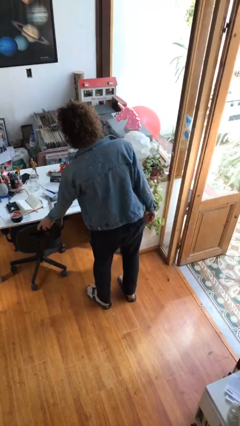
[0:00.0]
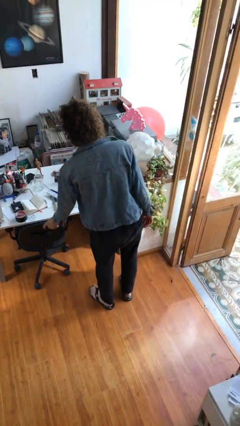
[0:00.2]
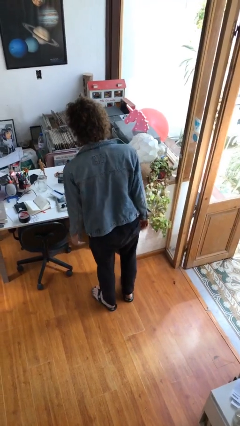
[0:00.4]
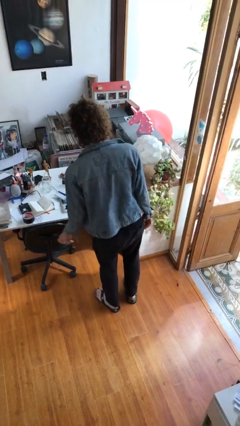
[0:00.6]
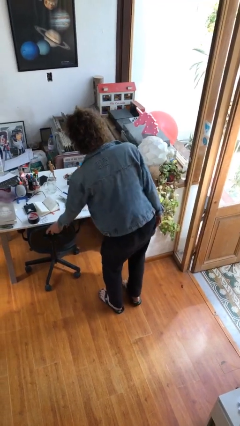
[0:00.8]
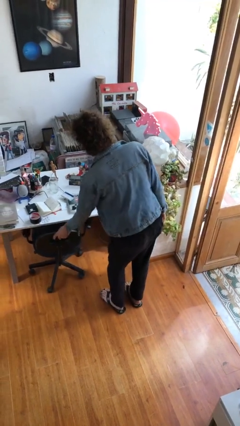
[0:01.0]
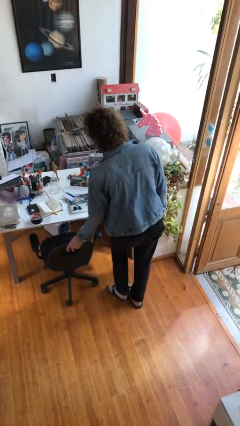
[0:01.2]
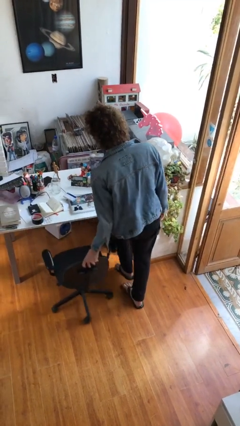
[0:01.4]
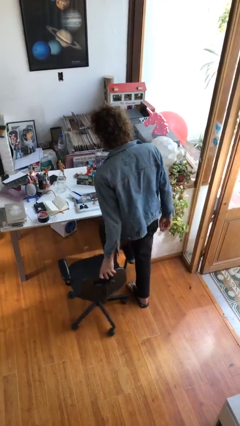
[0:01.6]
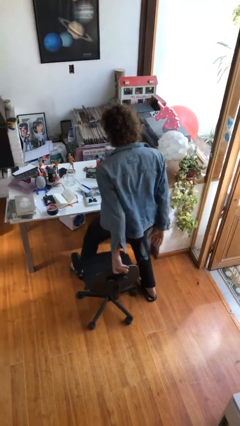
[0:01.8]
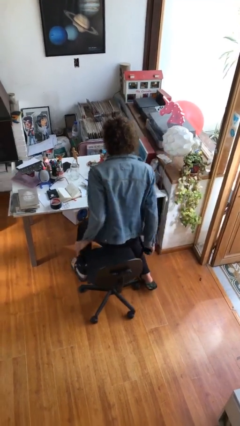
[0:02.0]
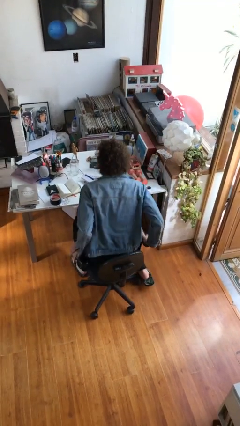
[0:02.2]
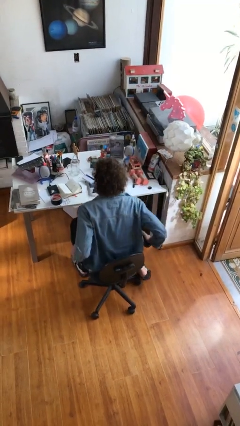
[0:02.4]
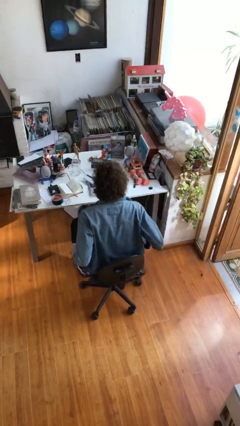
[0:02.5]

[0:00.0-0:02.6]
person sits down

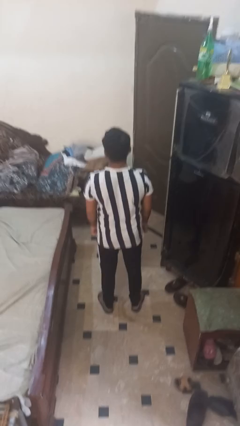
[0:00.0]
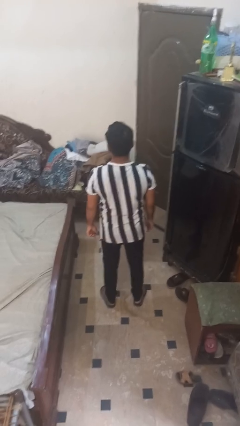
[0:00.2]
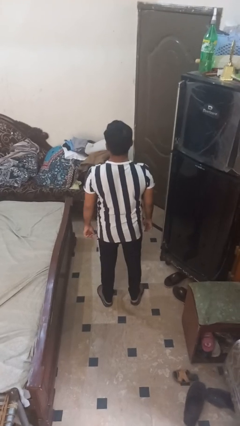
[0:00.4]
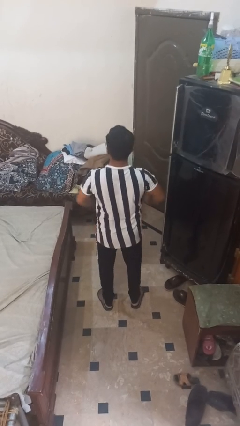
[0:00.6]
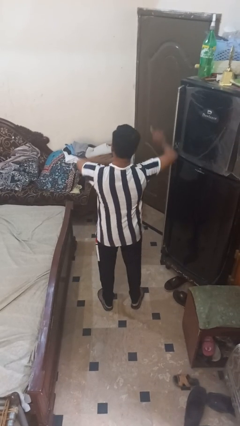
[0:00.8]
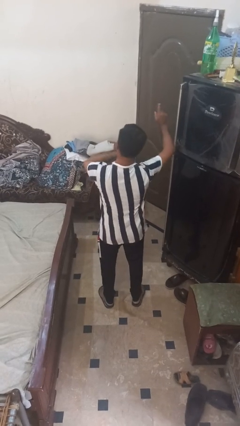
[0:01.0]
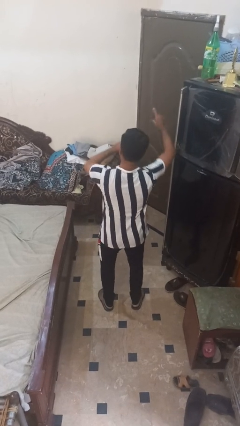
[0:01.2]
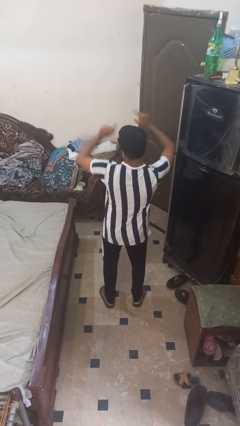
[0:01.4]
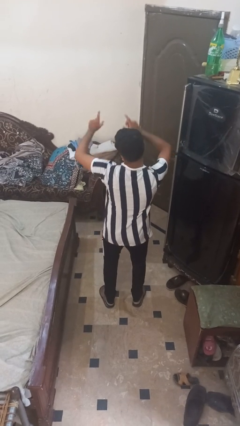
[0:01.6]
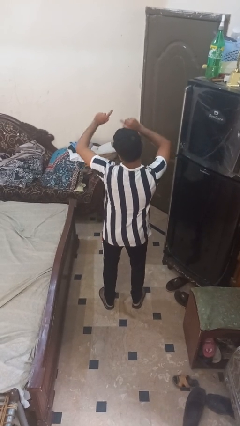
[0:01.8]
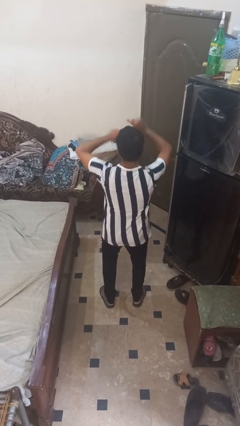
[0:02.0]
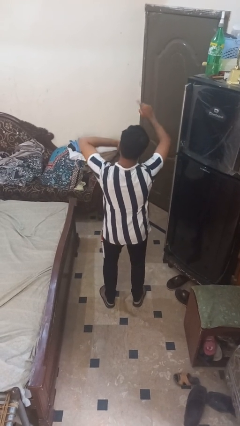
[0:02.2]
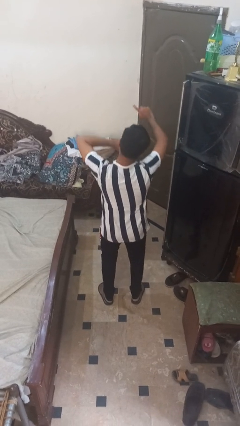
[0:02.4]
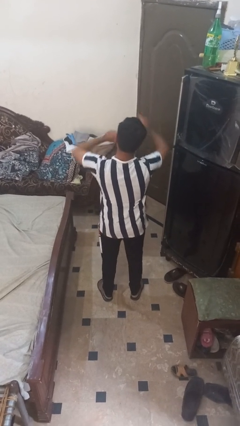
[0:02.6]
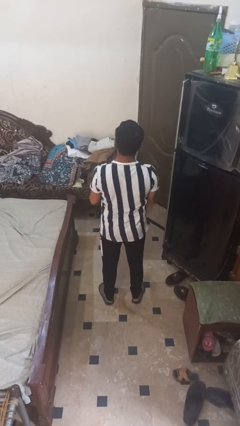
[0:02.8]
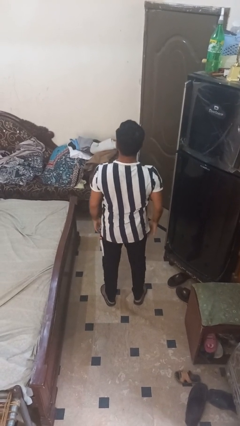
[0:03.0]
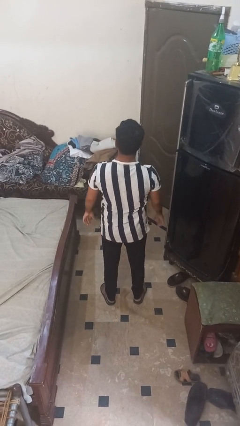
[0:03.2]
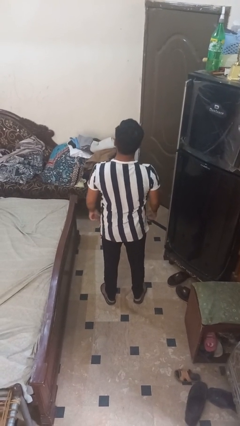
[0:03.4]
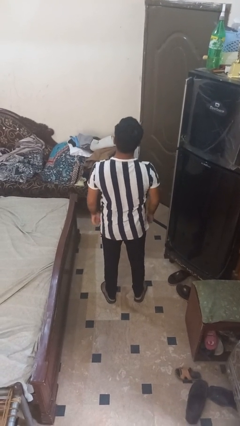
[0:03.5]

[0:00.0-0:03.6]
person dances in place

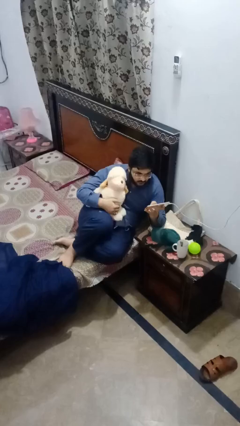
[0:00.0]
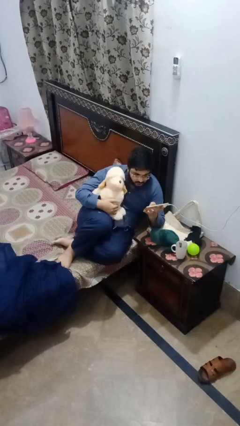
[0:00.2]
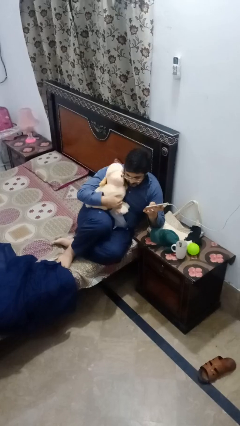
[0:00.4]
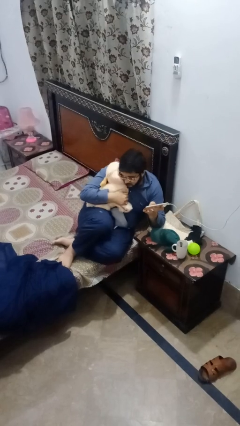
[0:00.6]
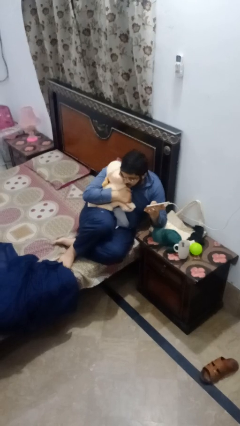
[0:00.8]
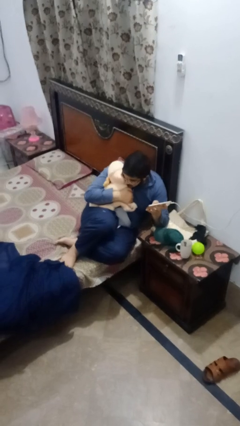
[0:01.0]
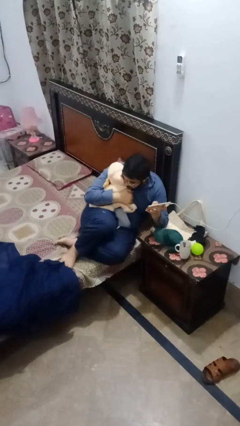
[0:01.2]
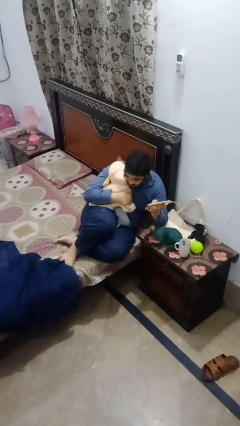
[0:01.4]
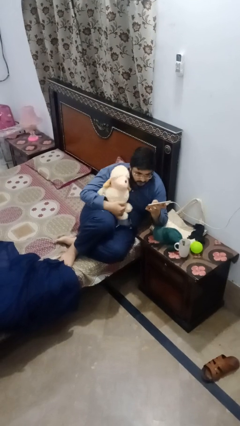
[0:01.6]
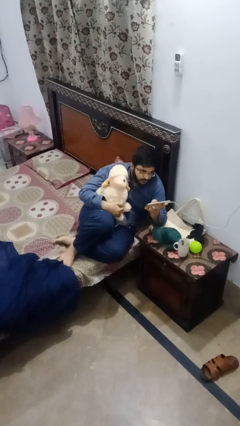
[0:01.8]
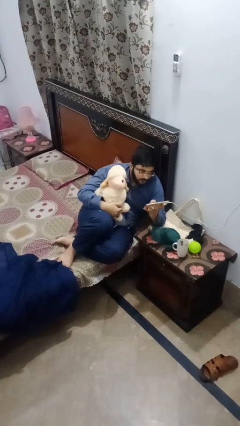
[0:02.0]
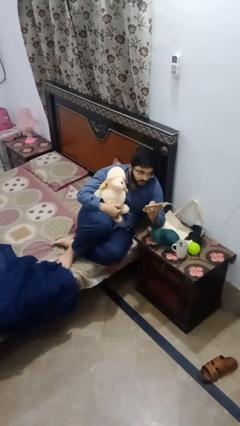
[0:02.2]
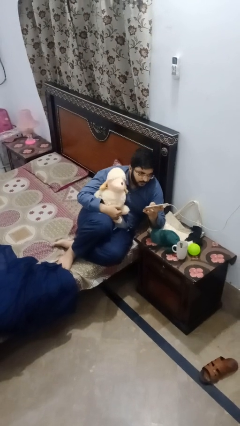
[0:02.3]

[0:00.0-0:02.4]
person hugs stuffed animal

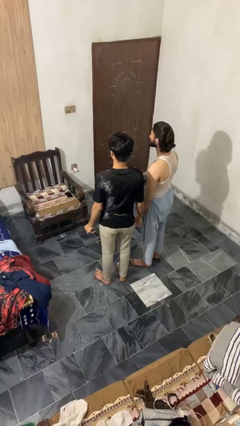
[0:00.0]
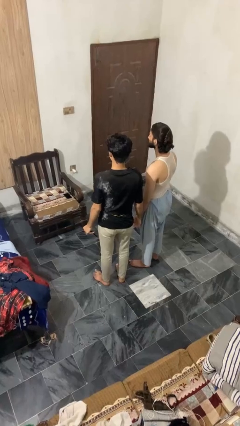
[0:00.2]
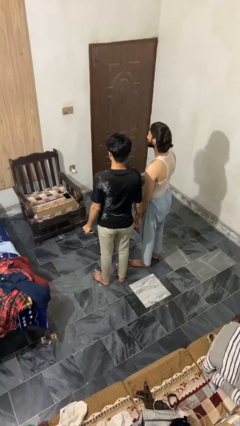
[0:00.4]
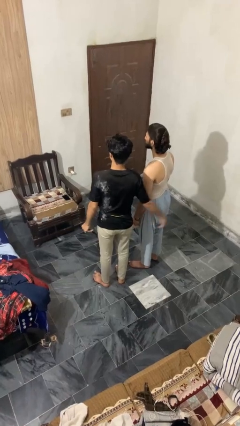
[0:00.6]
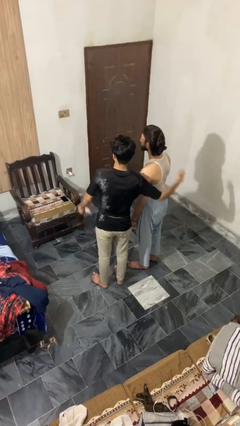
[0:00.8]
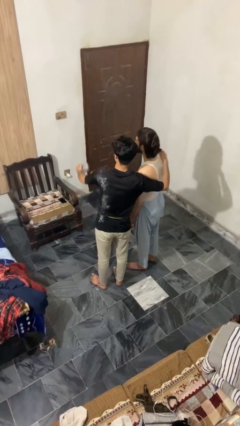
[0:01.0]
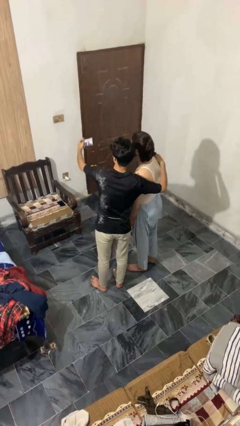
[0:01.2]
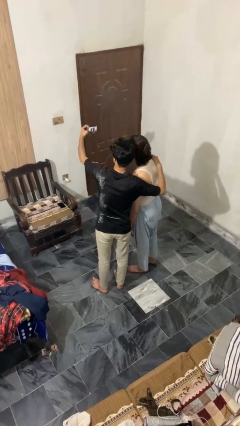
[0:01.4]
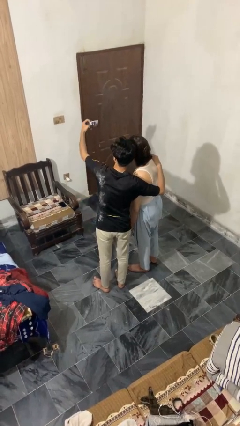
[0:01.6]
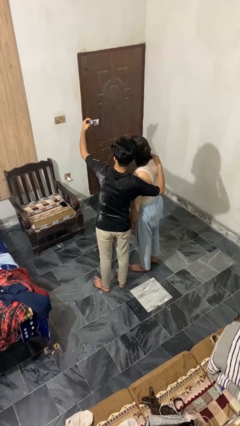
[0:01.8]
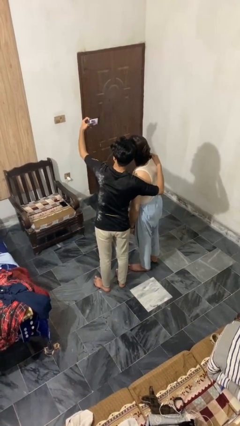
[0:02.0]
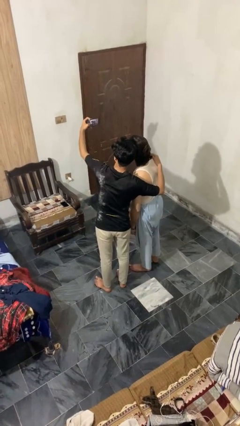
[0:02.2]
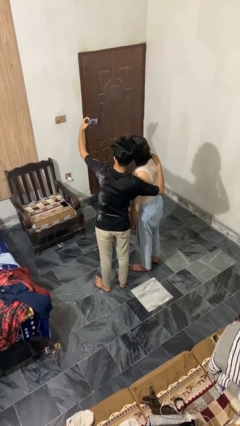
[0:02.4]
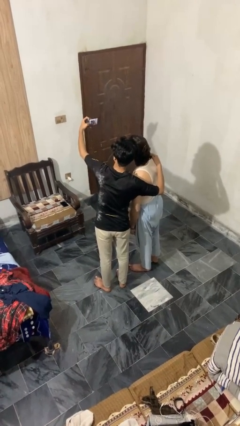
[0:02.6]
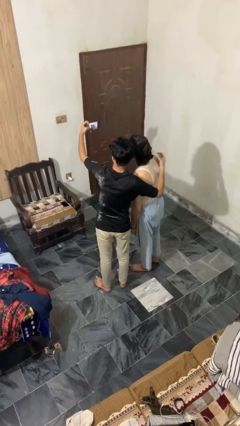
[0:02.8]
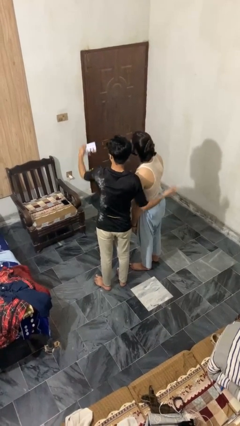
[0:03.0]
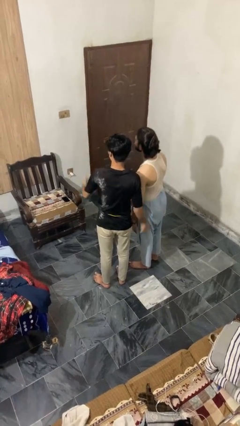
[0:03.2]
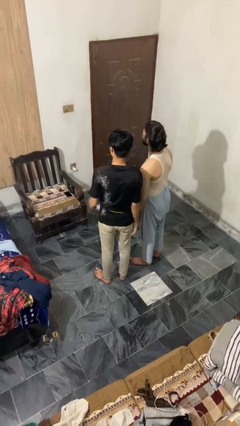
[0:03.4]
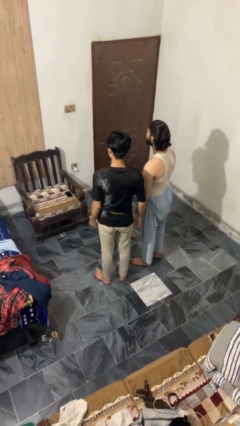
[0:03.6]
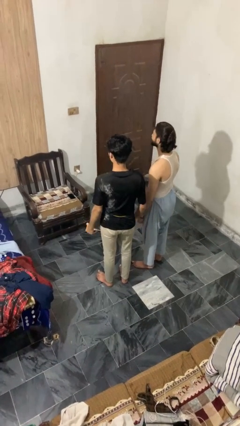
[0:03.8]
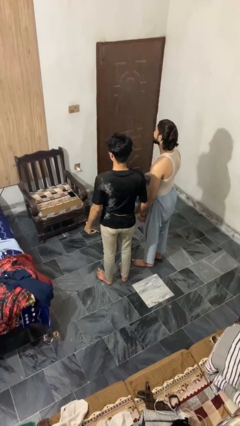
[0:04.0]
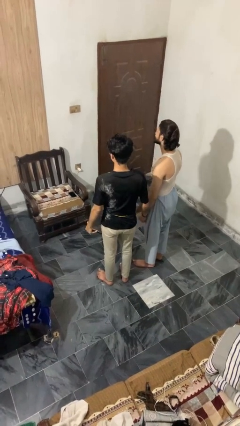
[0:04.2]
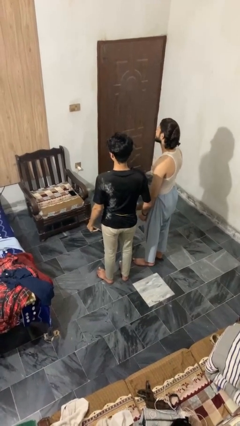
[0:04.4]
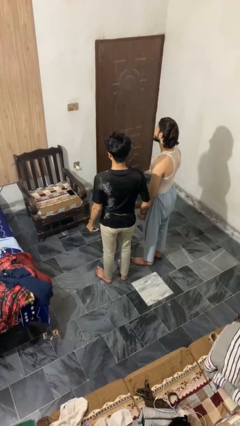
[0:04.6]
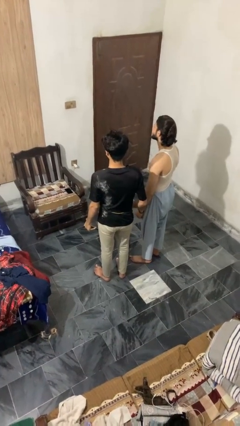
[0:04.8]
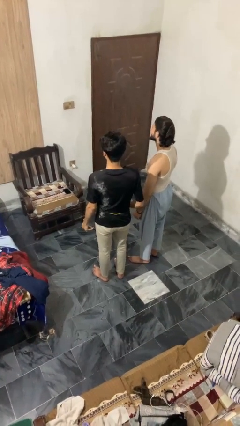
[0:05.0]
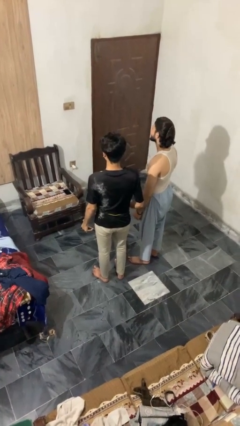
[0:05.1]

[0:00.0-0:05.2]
person takes selfie with person

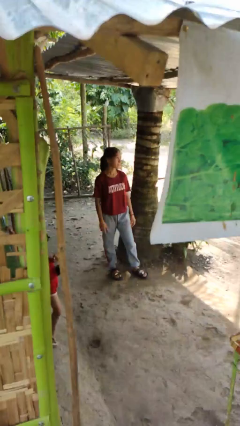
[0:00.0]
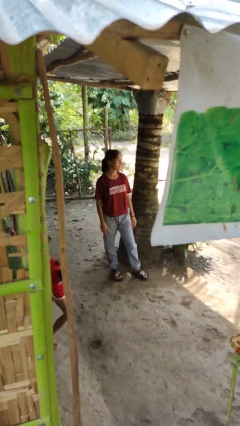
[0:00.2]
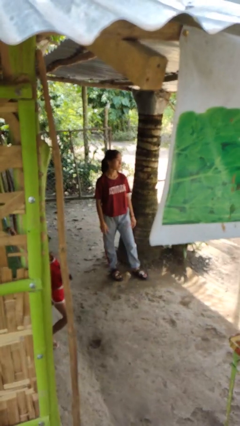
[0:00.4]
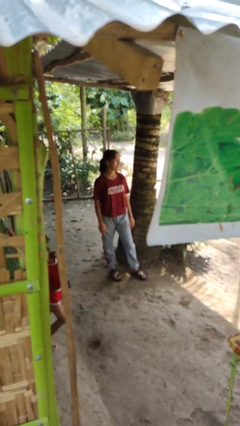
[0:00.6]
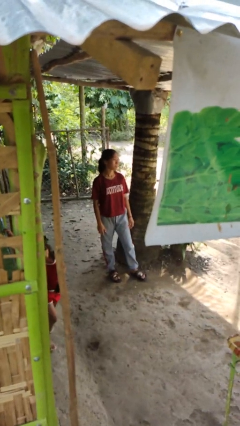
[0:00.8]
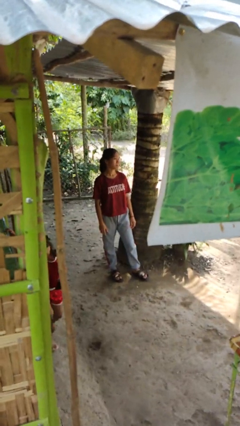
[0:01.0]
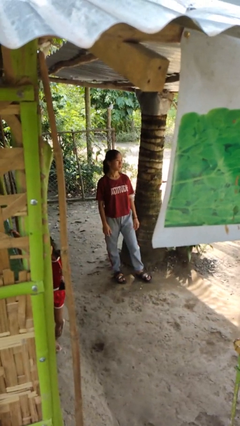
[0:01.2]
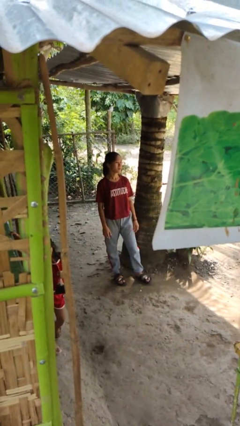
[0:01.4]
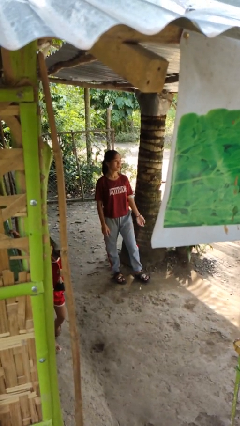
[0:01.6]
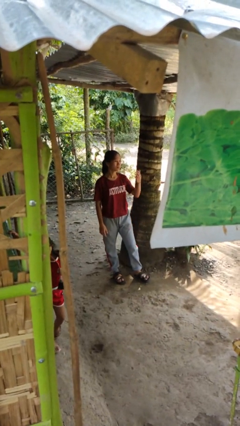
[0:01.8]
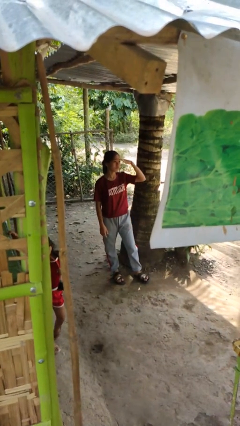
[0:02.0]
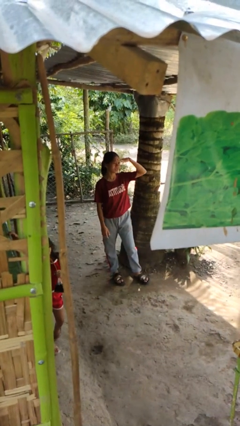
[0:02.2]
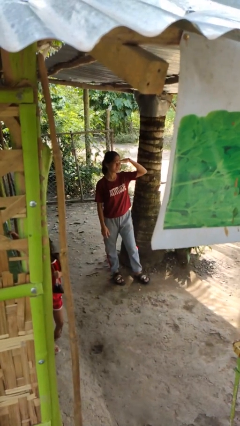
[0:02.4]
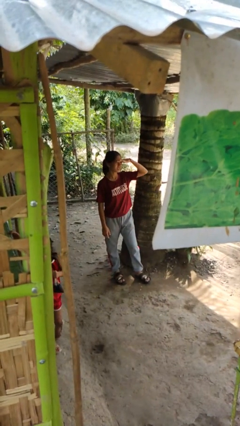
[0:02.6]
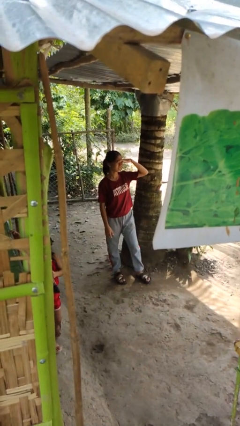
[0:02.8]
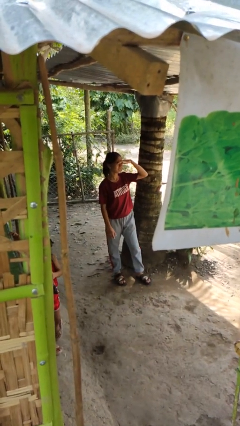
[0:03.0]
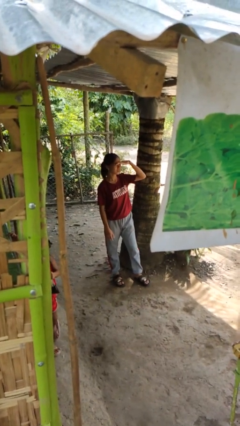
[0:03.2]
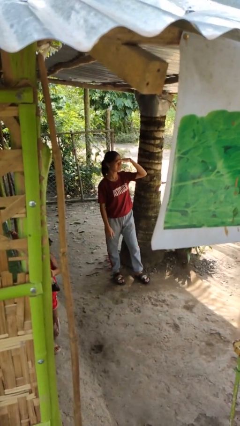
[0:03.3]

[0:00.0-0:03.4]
person shades eyes

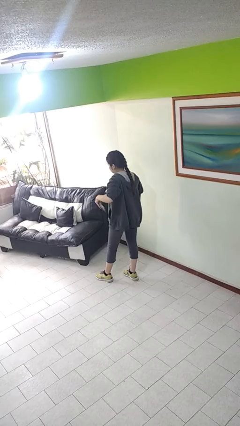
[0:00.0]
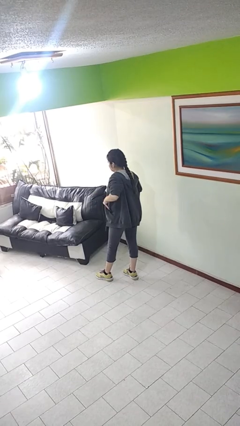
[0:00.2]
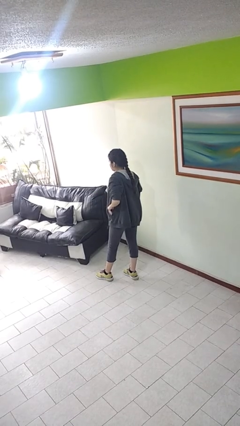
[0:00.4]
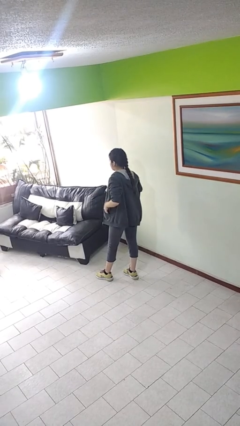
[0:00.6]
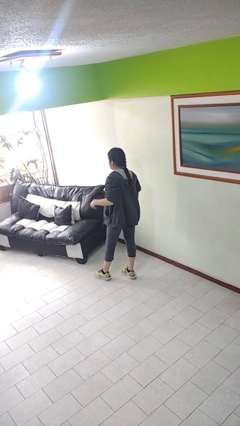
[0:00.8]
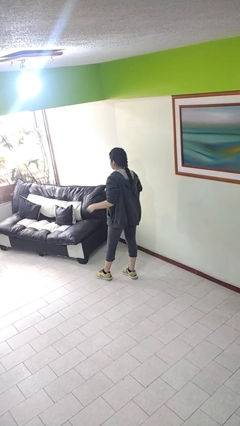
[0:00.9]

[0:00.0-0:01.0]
person puts phone into pocket
